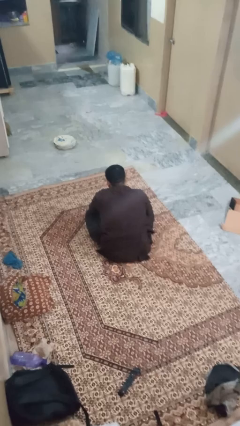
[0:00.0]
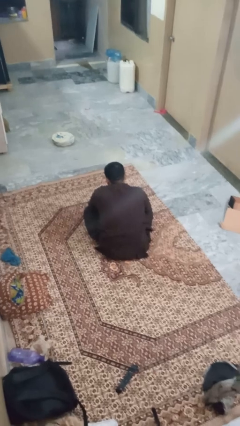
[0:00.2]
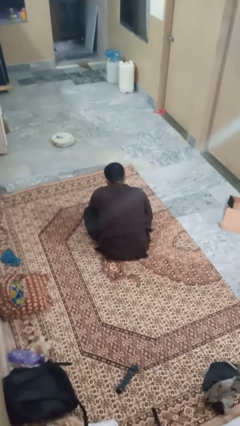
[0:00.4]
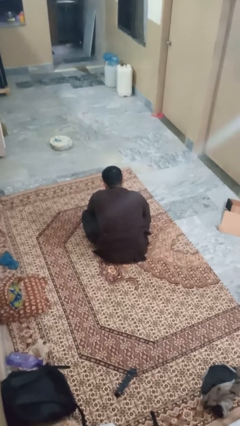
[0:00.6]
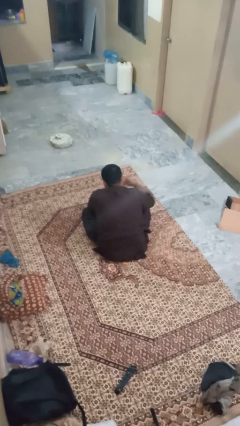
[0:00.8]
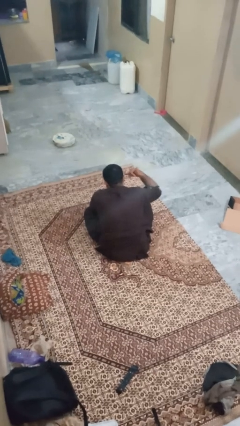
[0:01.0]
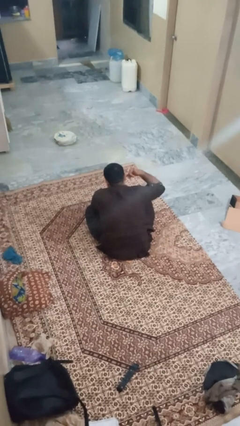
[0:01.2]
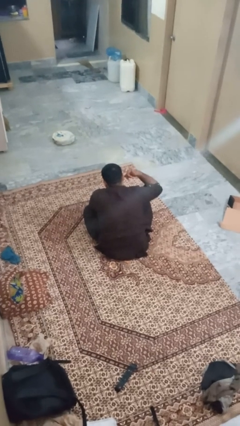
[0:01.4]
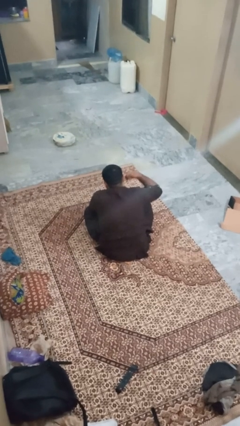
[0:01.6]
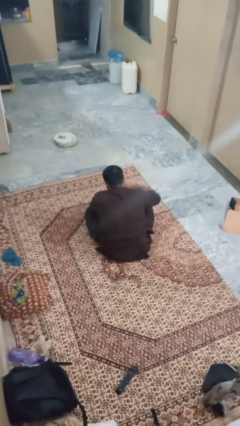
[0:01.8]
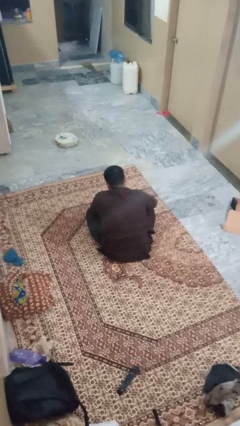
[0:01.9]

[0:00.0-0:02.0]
person gestures call me

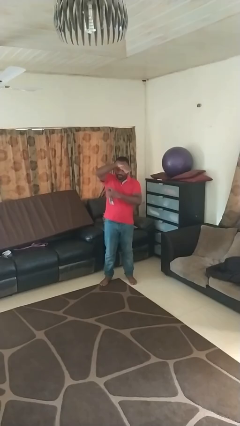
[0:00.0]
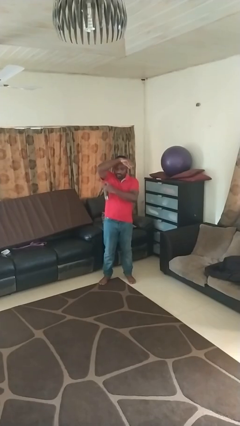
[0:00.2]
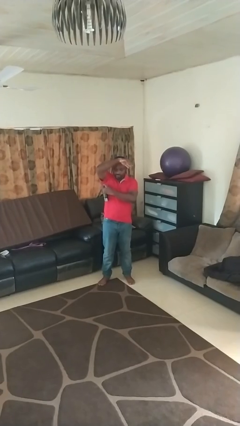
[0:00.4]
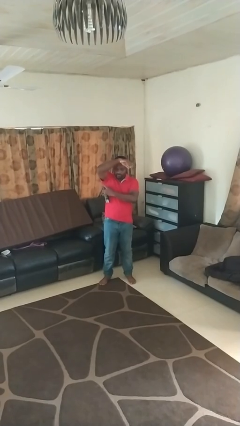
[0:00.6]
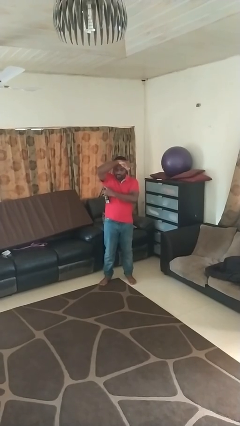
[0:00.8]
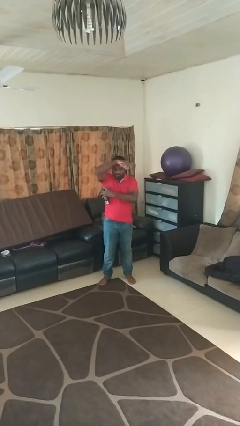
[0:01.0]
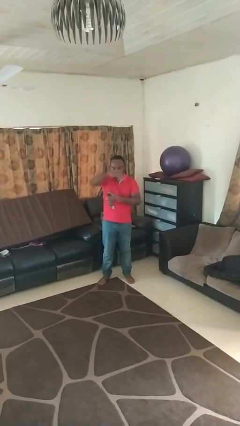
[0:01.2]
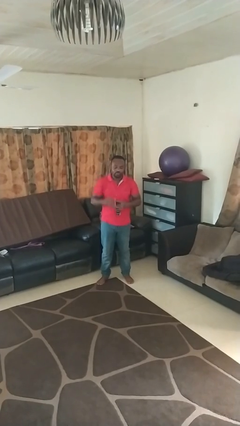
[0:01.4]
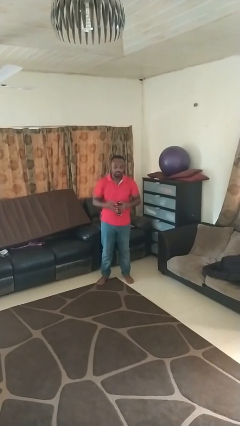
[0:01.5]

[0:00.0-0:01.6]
person applies deodorant

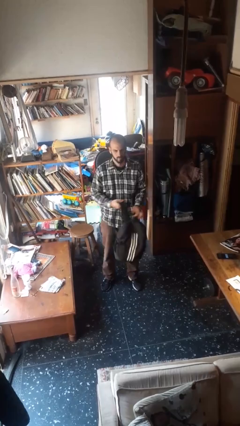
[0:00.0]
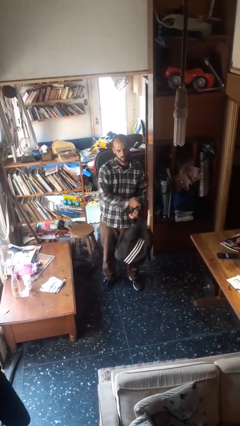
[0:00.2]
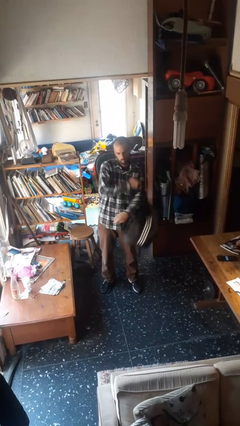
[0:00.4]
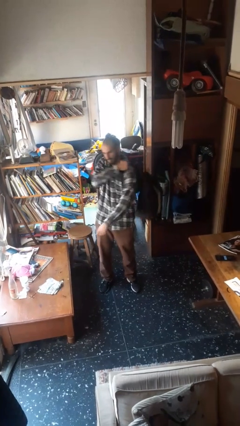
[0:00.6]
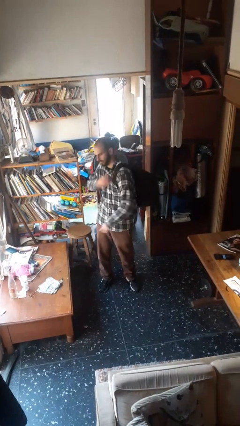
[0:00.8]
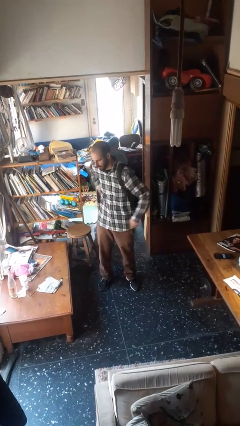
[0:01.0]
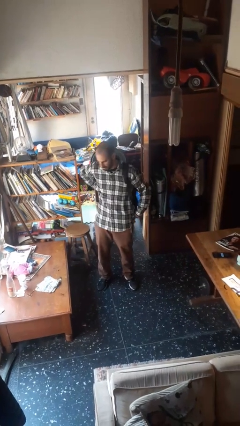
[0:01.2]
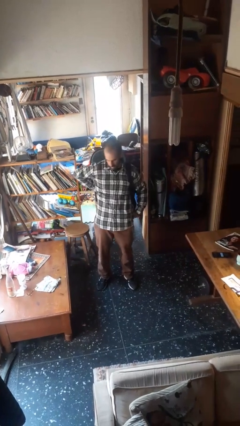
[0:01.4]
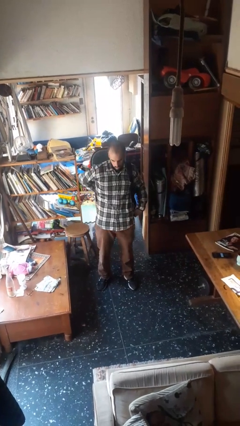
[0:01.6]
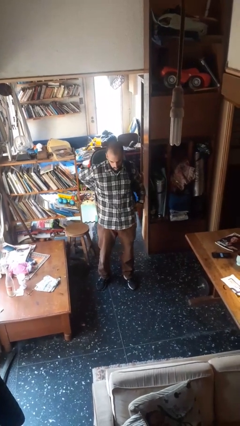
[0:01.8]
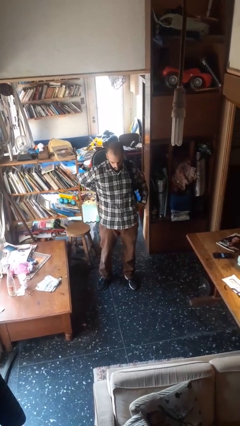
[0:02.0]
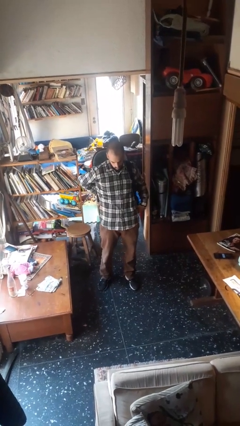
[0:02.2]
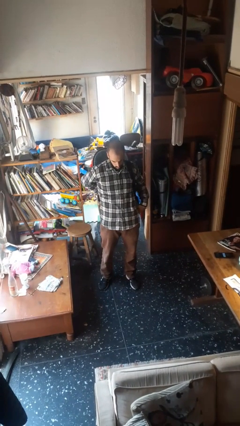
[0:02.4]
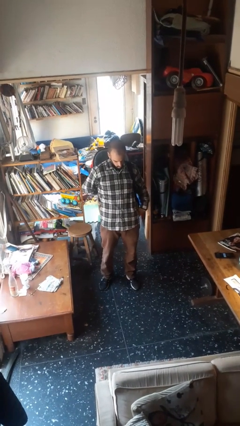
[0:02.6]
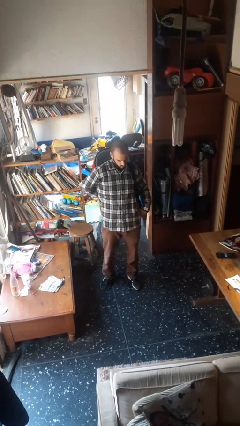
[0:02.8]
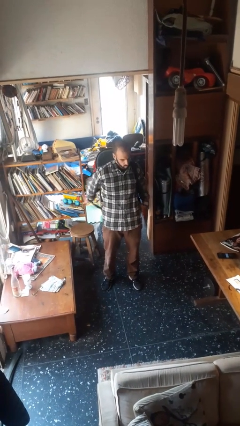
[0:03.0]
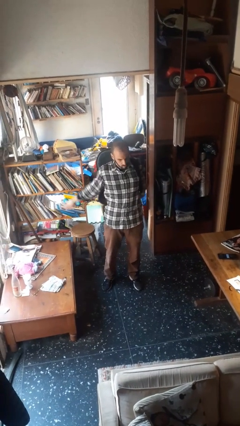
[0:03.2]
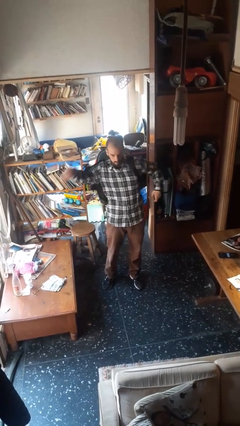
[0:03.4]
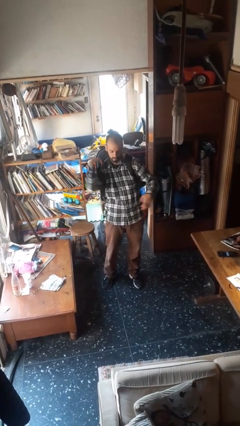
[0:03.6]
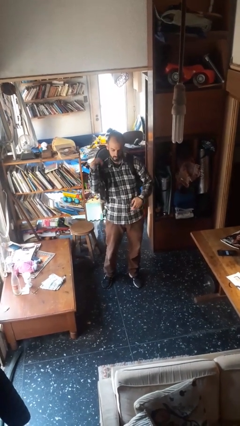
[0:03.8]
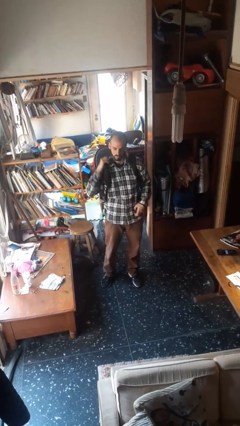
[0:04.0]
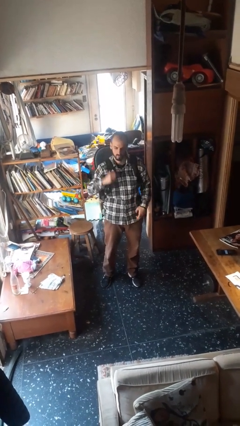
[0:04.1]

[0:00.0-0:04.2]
person puts on backpack

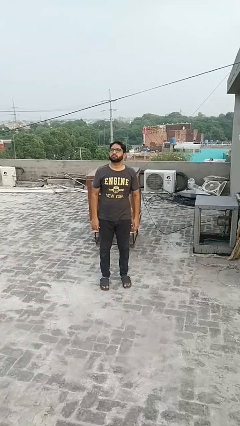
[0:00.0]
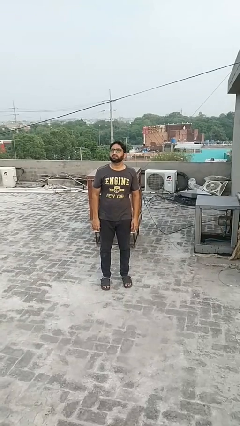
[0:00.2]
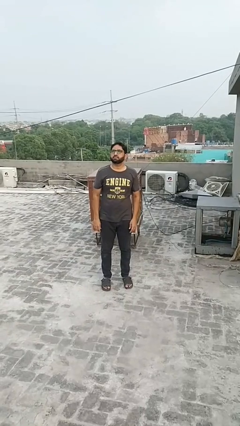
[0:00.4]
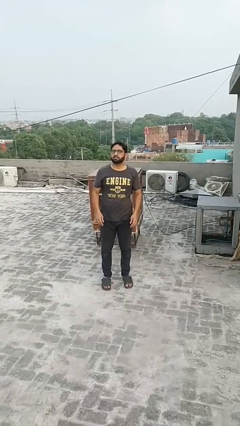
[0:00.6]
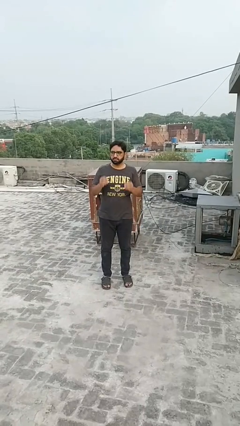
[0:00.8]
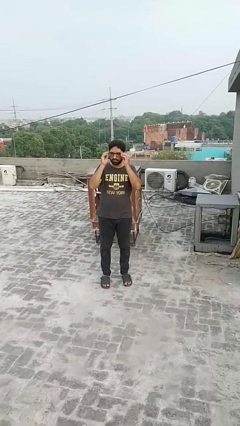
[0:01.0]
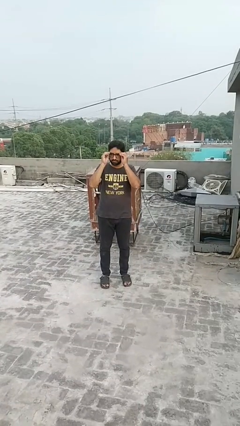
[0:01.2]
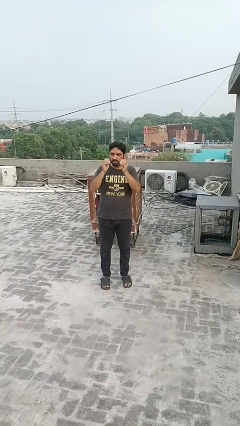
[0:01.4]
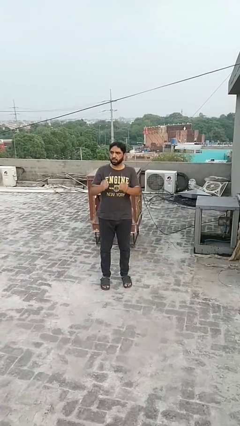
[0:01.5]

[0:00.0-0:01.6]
person takes off glasses

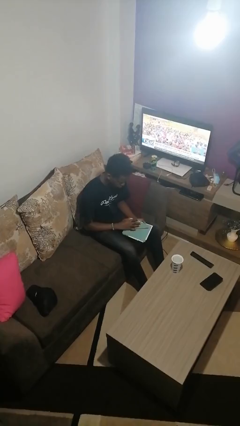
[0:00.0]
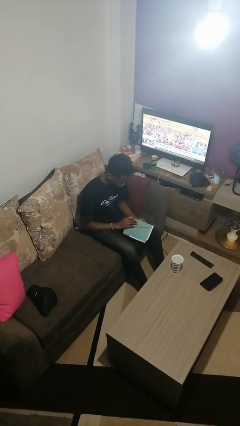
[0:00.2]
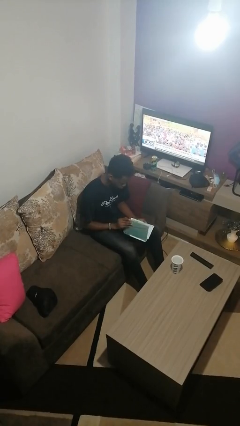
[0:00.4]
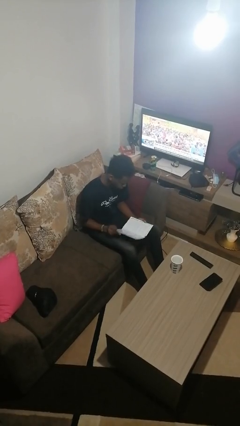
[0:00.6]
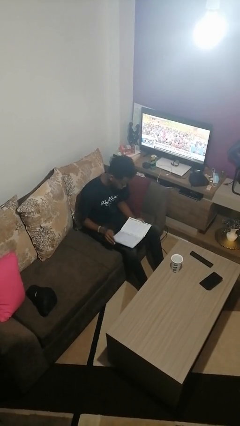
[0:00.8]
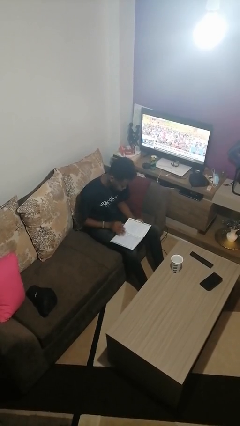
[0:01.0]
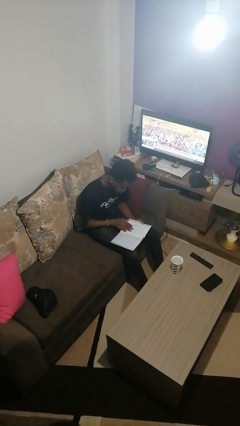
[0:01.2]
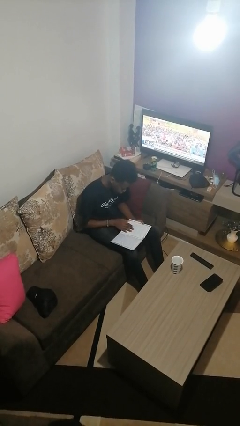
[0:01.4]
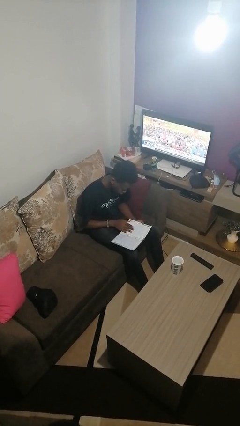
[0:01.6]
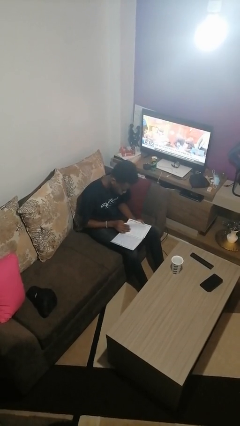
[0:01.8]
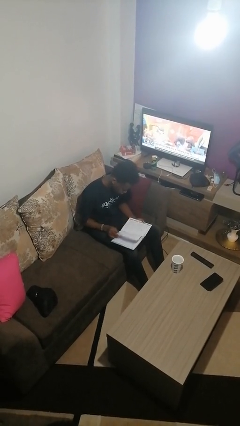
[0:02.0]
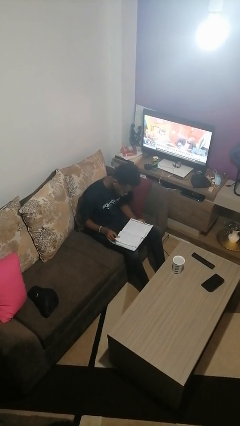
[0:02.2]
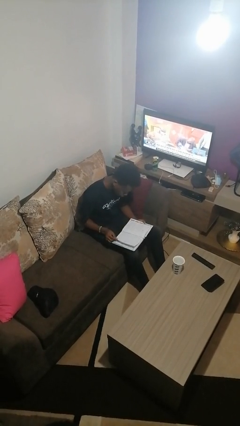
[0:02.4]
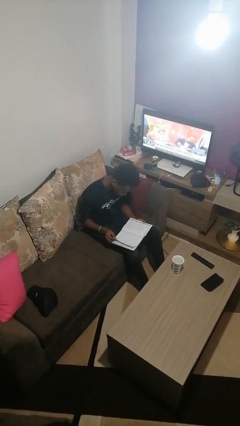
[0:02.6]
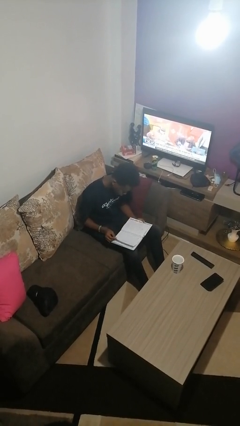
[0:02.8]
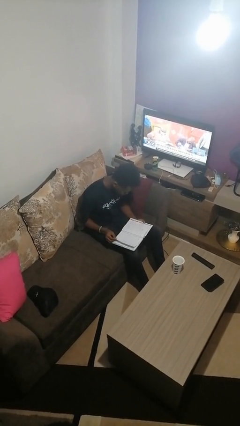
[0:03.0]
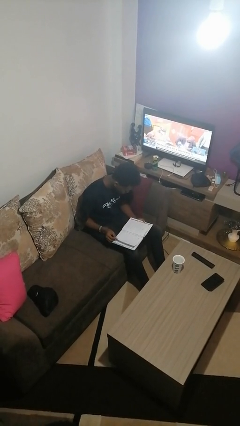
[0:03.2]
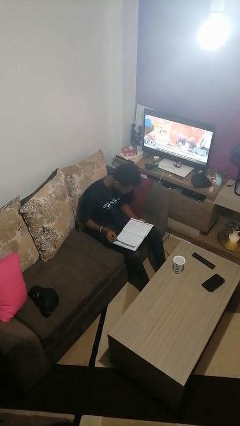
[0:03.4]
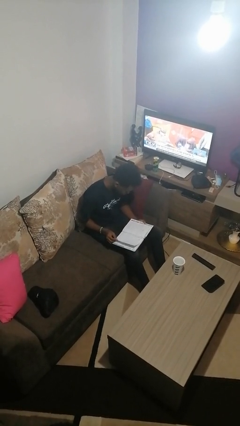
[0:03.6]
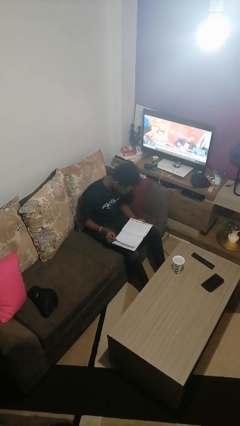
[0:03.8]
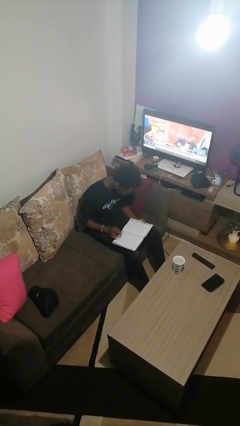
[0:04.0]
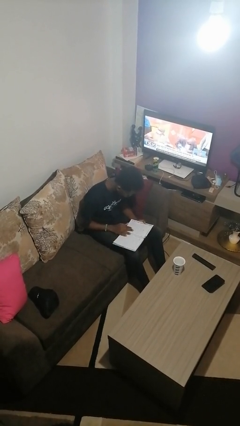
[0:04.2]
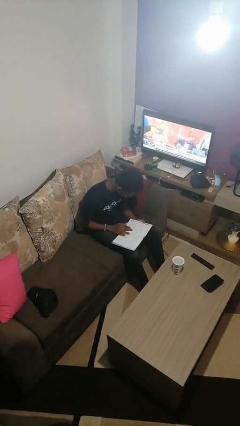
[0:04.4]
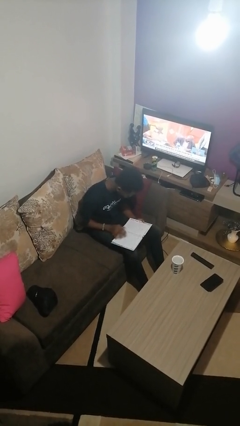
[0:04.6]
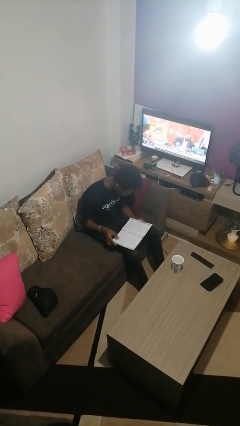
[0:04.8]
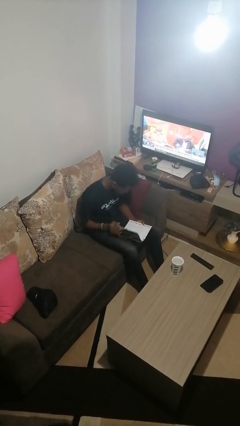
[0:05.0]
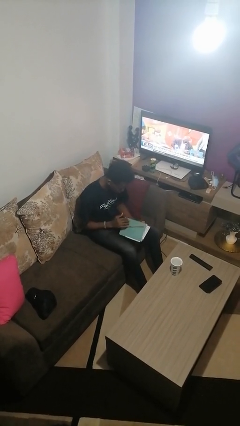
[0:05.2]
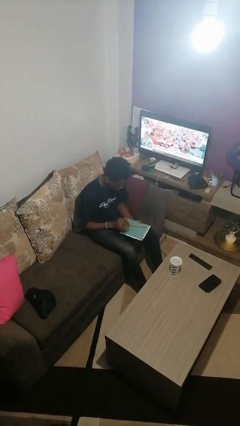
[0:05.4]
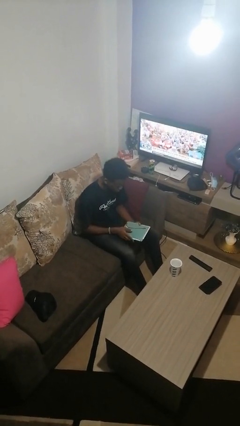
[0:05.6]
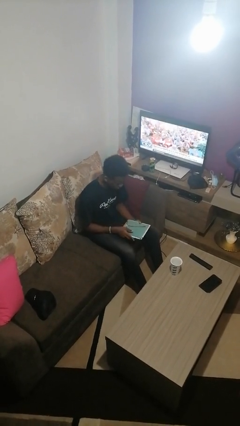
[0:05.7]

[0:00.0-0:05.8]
person reads book

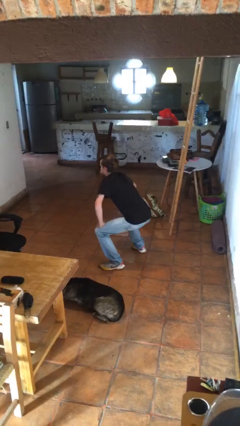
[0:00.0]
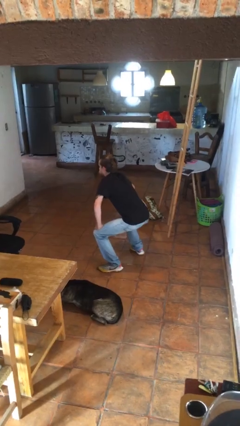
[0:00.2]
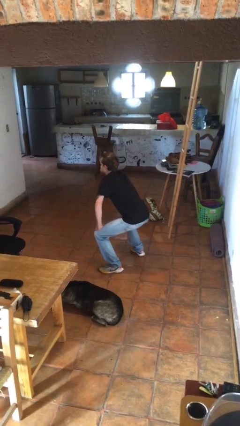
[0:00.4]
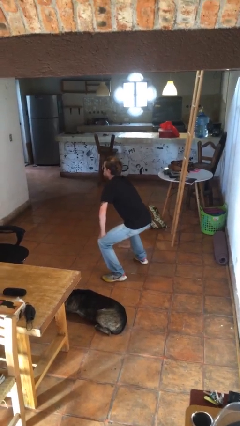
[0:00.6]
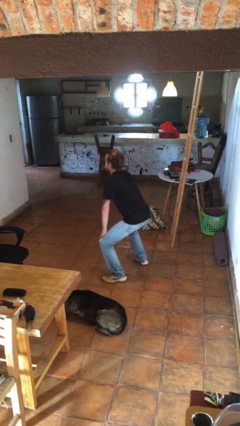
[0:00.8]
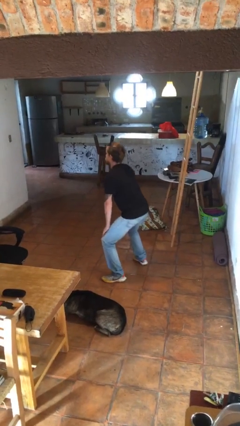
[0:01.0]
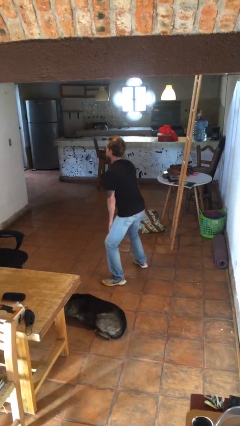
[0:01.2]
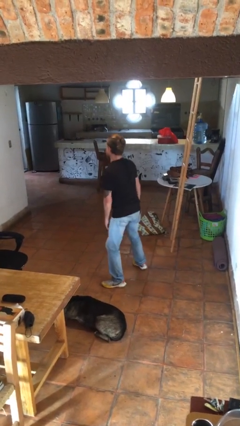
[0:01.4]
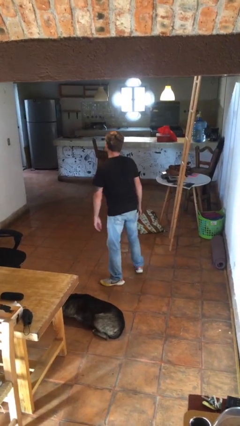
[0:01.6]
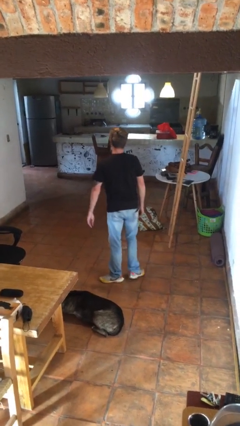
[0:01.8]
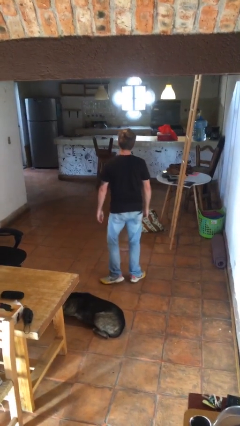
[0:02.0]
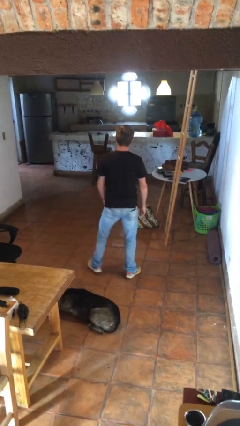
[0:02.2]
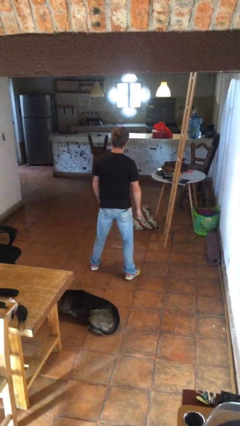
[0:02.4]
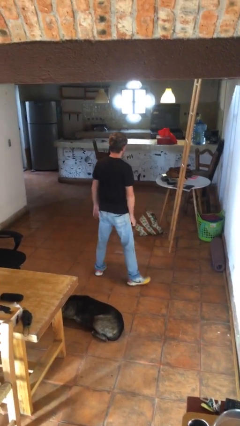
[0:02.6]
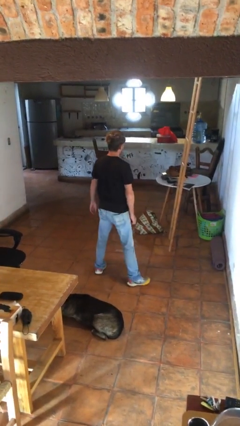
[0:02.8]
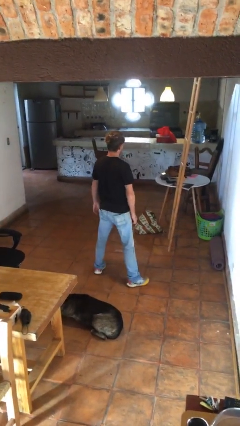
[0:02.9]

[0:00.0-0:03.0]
person stands up
